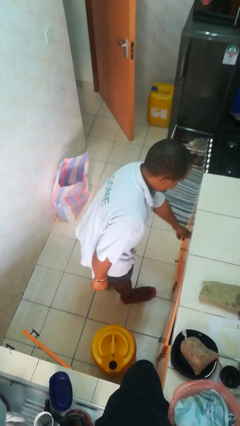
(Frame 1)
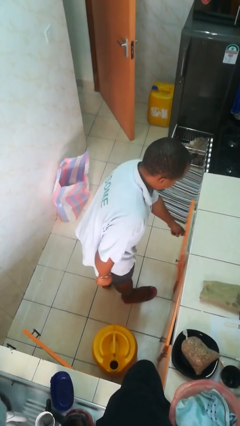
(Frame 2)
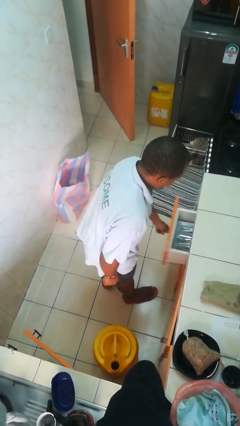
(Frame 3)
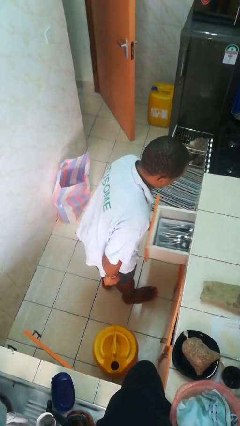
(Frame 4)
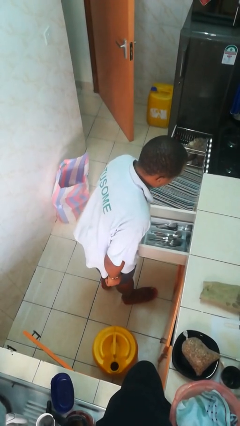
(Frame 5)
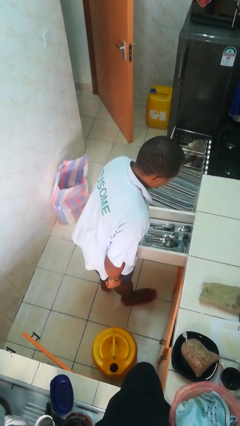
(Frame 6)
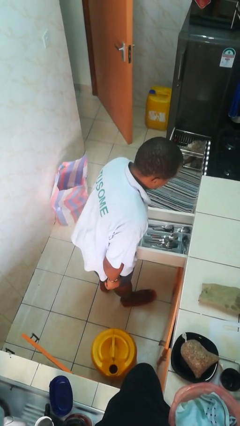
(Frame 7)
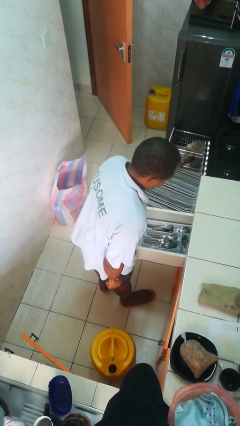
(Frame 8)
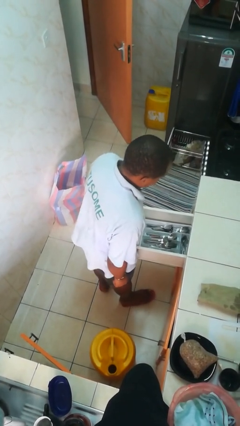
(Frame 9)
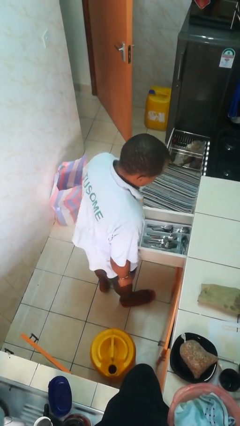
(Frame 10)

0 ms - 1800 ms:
person opens kitchen drawer

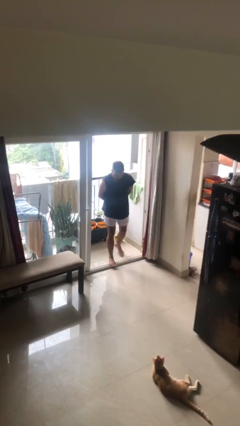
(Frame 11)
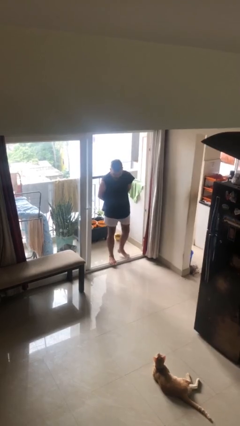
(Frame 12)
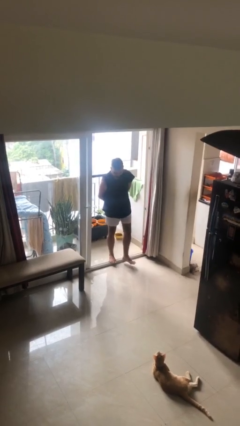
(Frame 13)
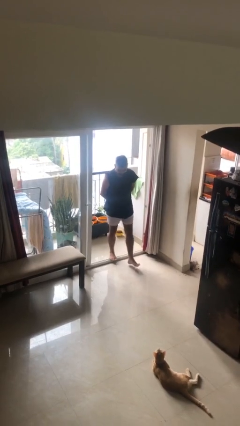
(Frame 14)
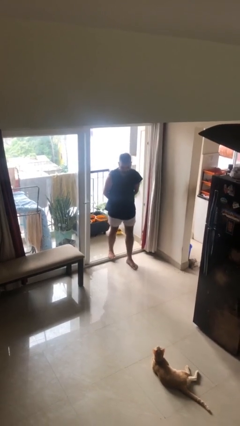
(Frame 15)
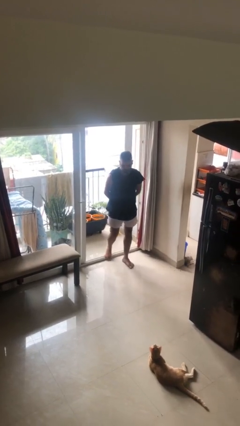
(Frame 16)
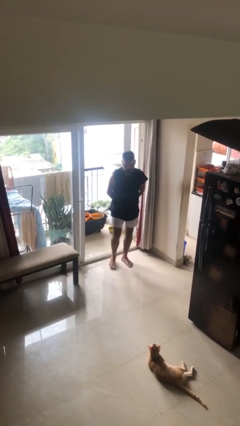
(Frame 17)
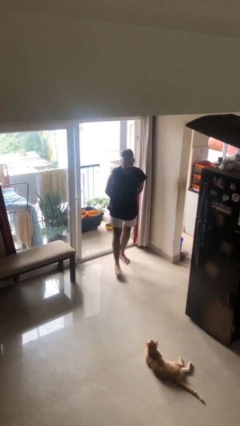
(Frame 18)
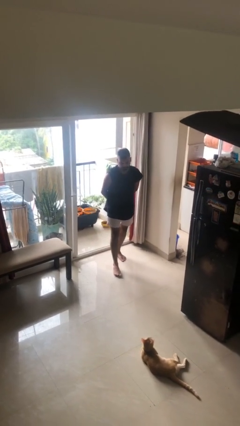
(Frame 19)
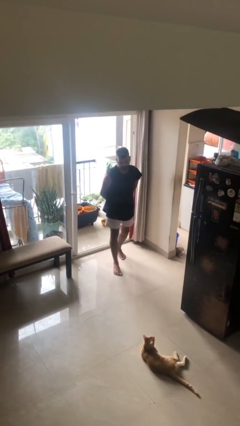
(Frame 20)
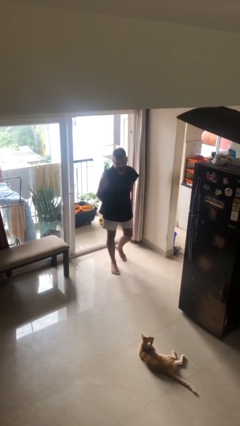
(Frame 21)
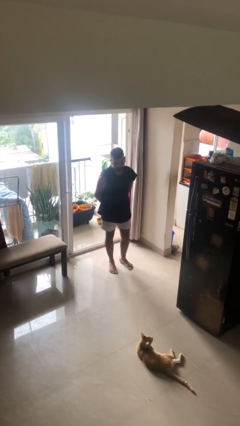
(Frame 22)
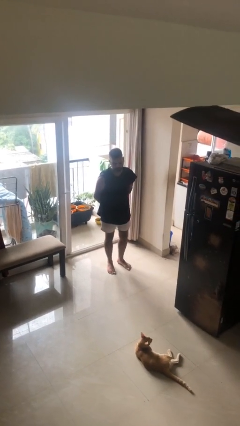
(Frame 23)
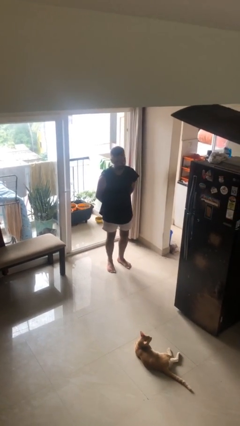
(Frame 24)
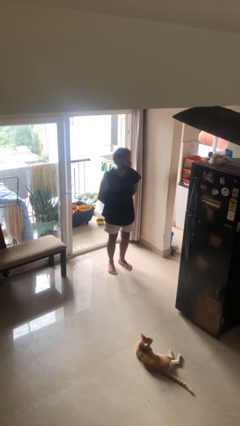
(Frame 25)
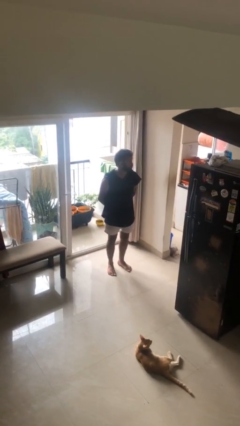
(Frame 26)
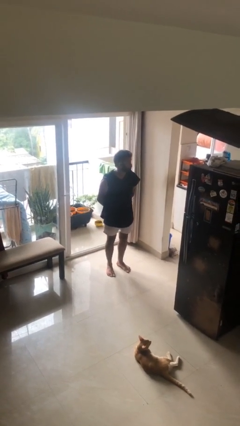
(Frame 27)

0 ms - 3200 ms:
person enters scene through structure

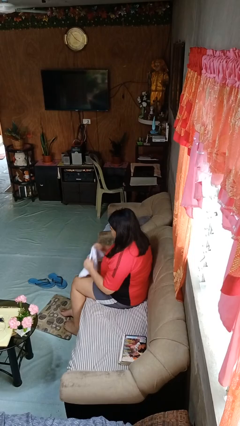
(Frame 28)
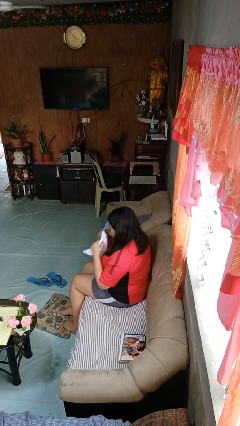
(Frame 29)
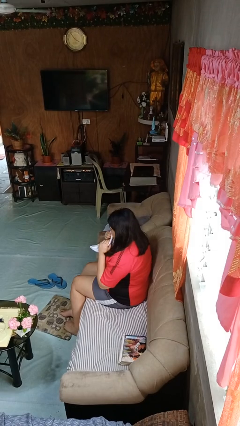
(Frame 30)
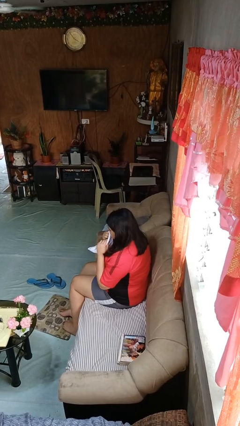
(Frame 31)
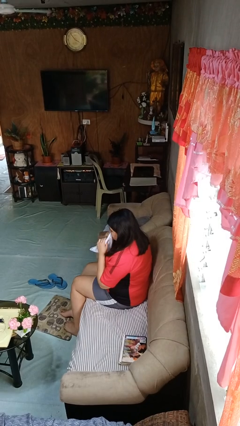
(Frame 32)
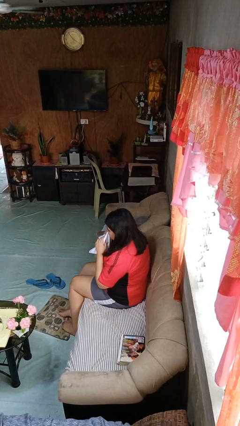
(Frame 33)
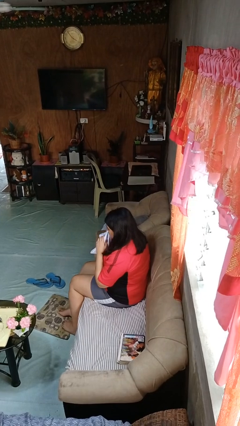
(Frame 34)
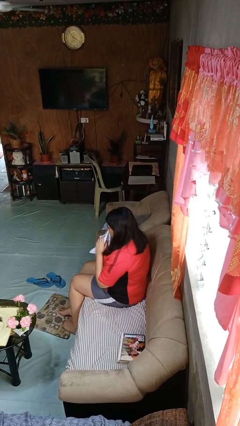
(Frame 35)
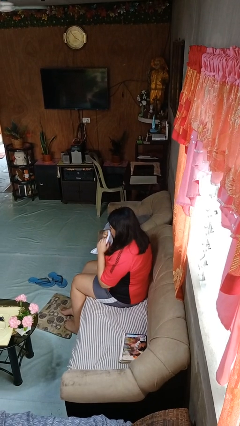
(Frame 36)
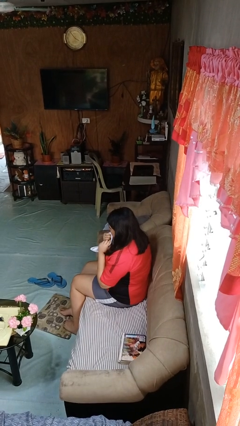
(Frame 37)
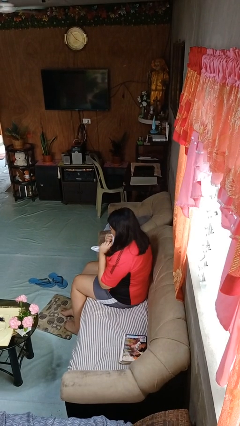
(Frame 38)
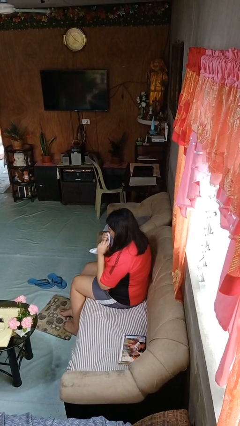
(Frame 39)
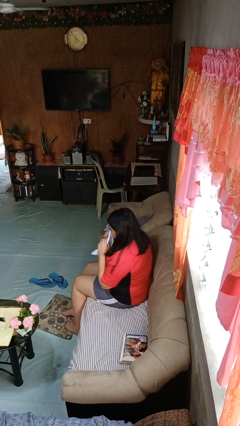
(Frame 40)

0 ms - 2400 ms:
person wipes mouth with napkin

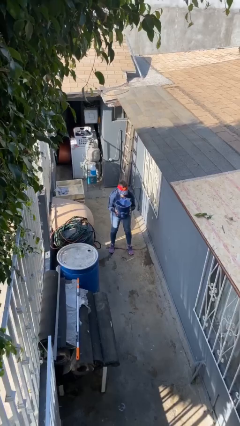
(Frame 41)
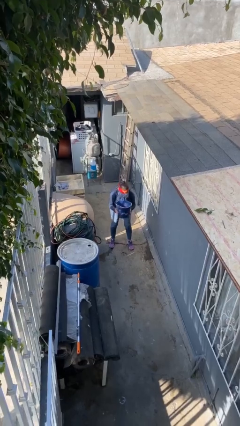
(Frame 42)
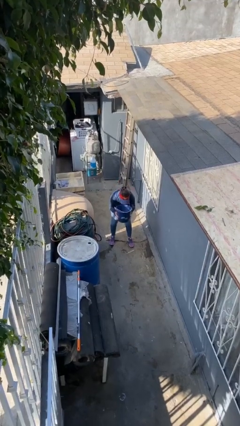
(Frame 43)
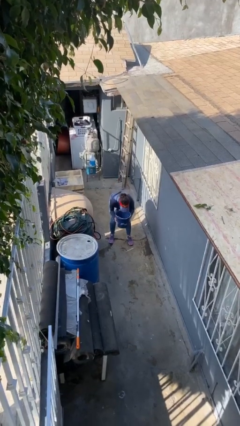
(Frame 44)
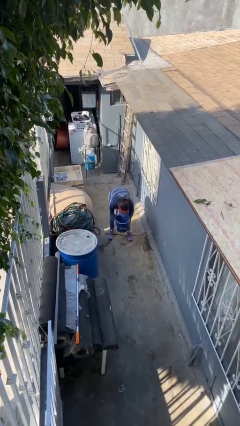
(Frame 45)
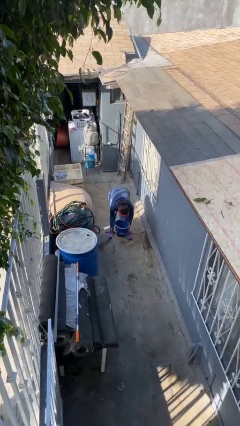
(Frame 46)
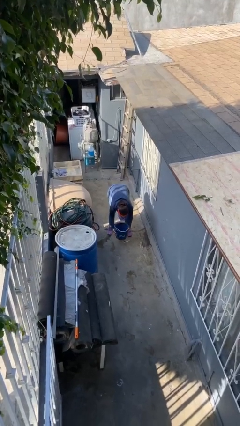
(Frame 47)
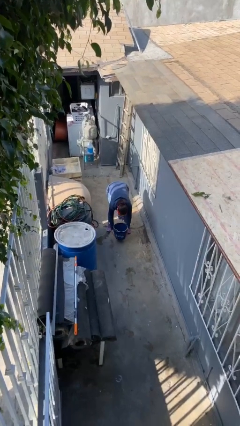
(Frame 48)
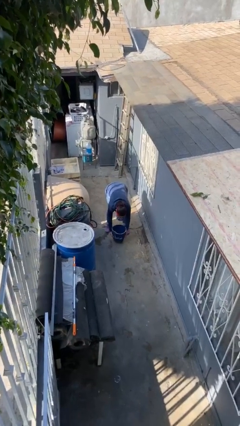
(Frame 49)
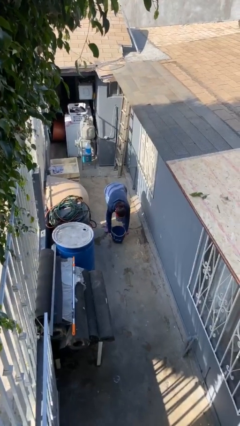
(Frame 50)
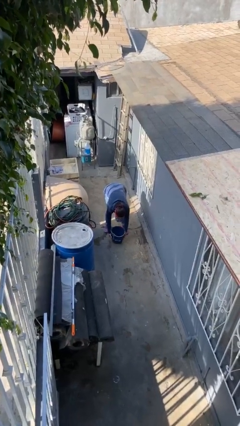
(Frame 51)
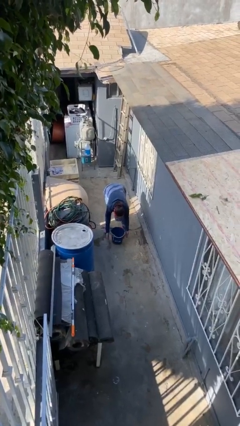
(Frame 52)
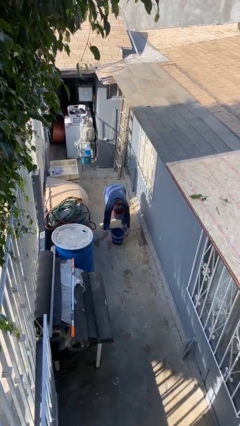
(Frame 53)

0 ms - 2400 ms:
person puts down object on floor

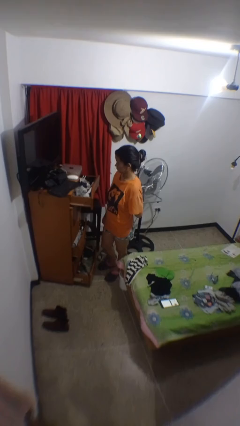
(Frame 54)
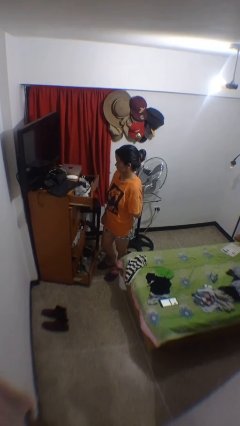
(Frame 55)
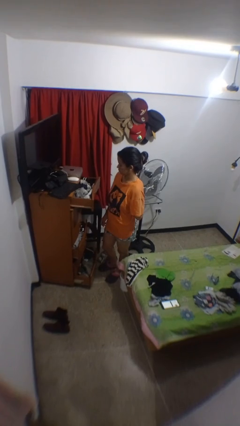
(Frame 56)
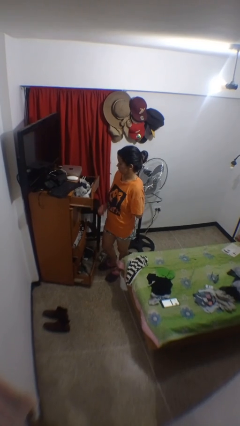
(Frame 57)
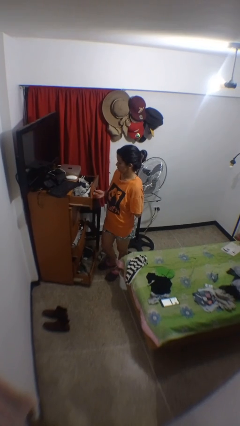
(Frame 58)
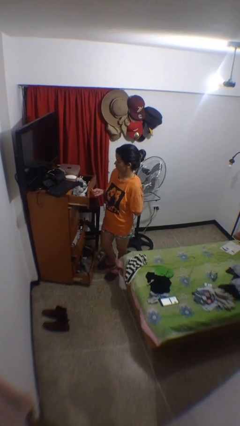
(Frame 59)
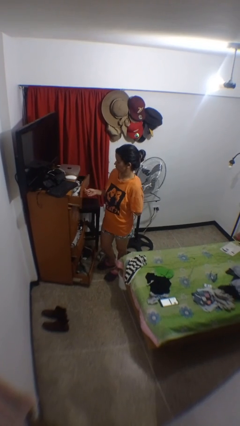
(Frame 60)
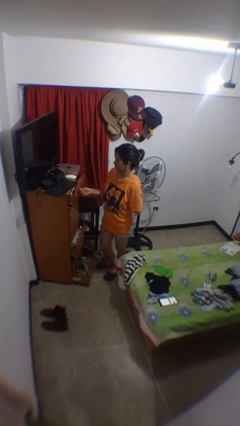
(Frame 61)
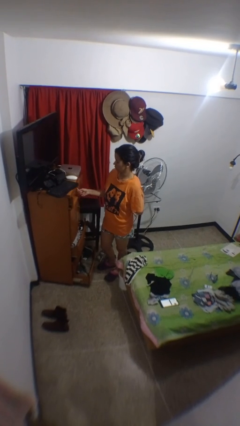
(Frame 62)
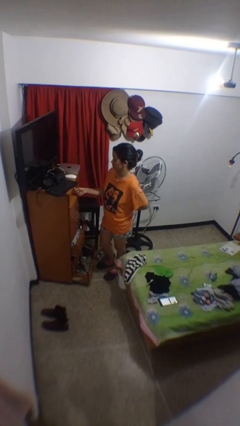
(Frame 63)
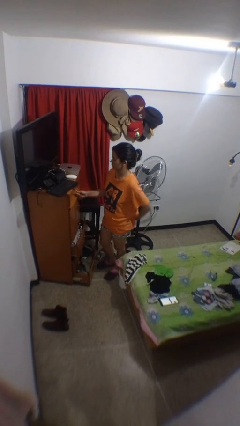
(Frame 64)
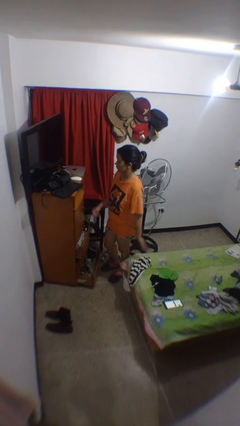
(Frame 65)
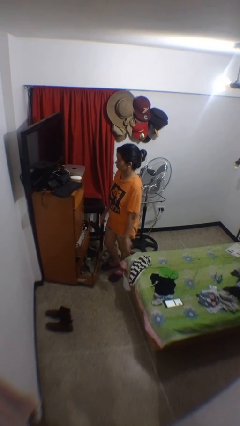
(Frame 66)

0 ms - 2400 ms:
person closes dresser drawer

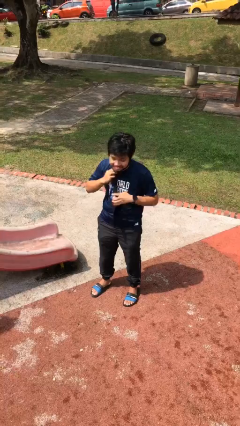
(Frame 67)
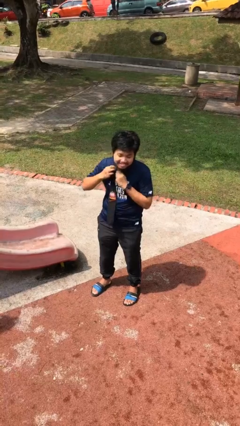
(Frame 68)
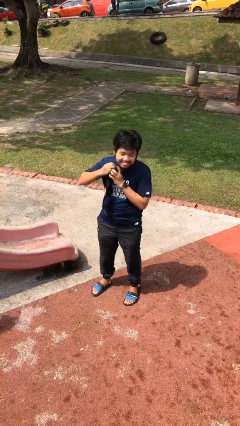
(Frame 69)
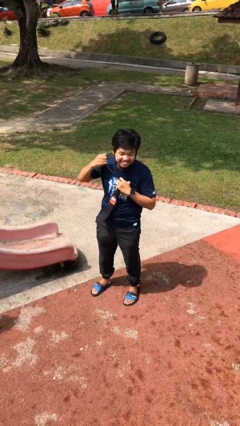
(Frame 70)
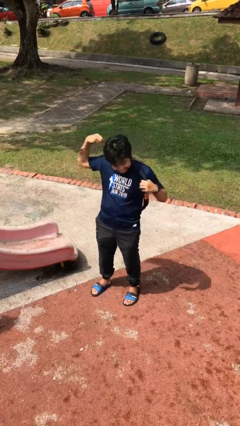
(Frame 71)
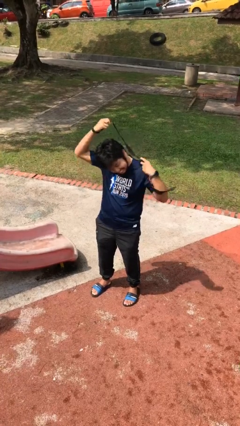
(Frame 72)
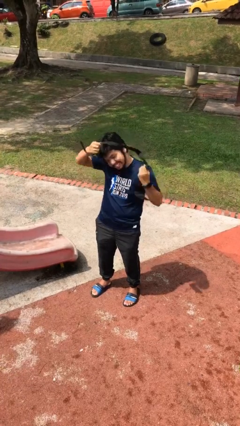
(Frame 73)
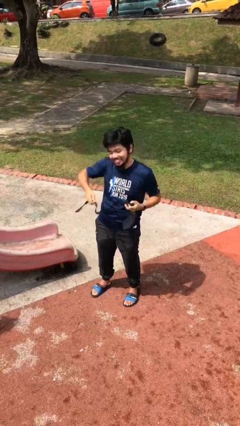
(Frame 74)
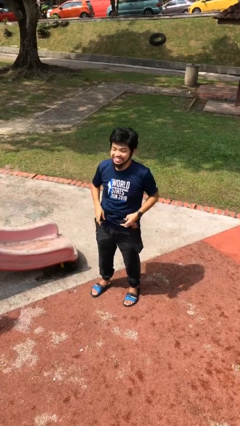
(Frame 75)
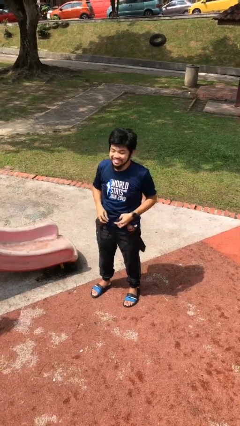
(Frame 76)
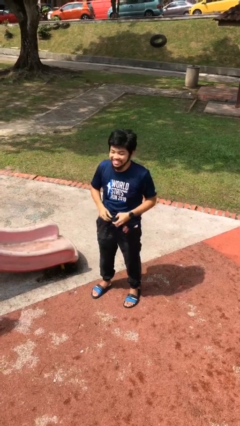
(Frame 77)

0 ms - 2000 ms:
person takes off necktie

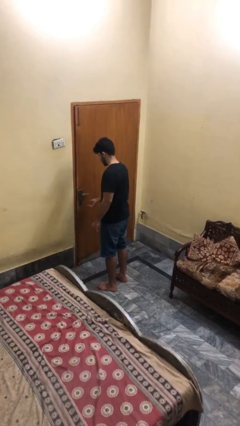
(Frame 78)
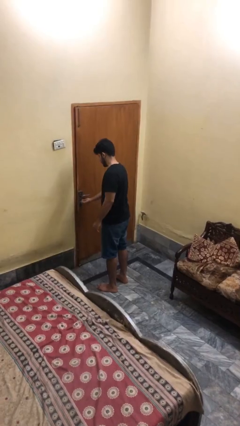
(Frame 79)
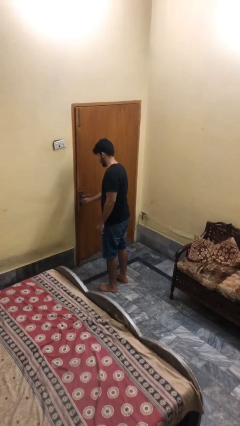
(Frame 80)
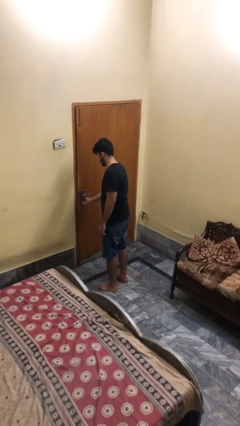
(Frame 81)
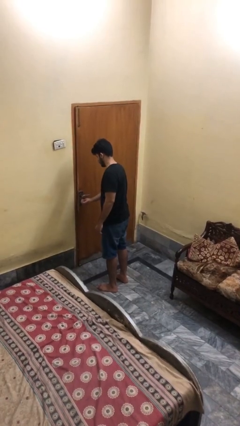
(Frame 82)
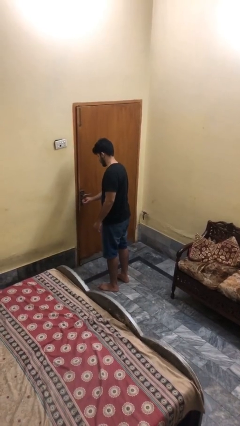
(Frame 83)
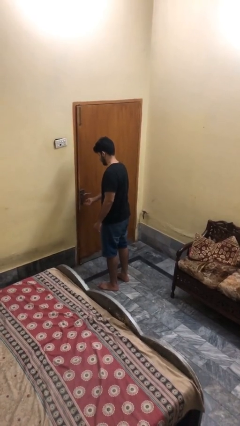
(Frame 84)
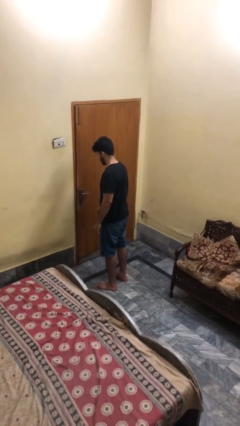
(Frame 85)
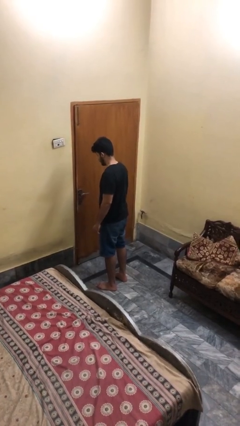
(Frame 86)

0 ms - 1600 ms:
person locks door with keys

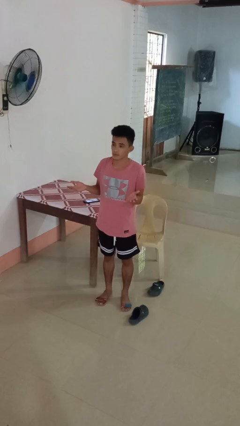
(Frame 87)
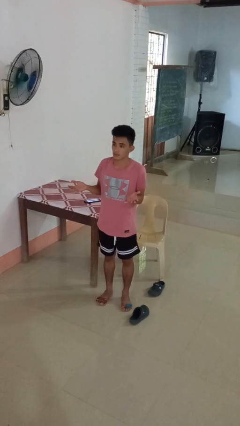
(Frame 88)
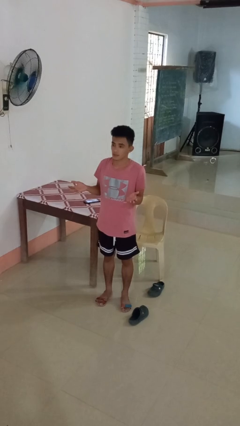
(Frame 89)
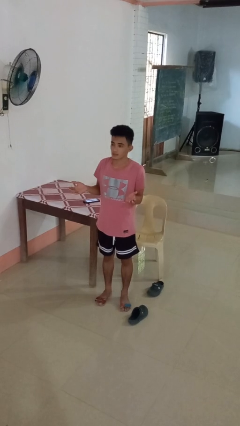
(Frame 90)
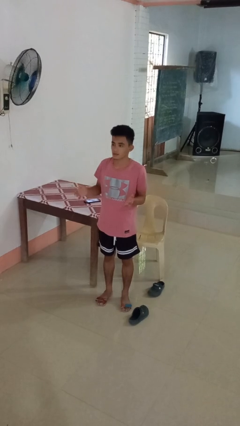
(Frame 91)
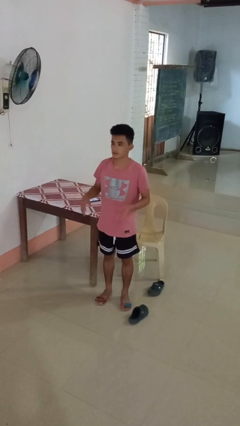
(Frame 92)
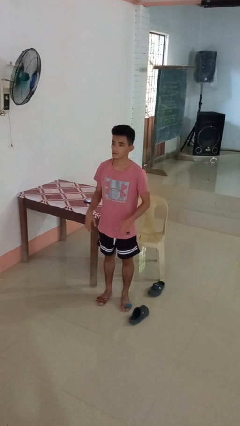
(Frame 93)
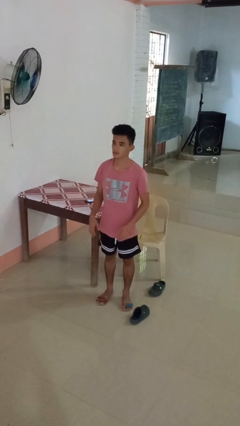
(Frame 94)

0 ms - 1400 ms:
person shrugs
